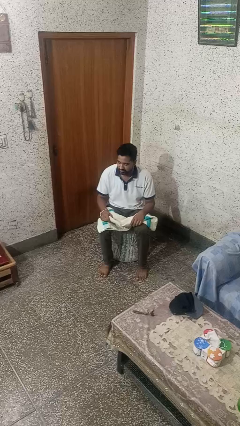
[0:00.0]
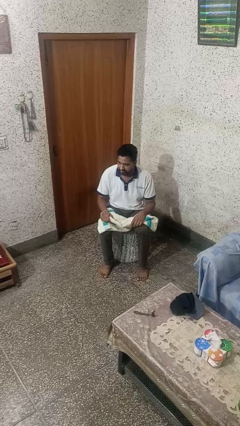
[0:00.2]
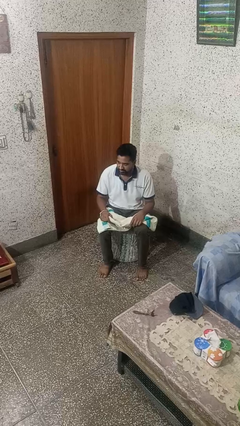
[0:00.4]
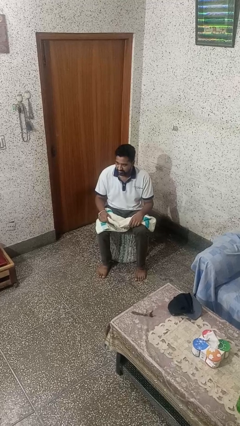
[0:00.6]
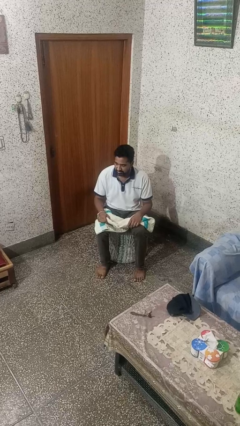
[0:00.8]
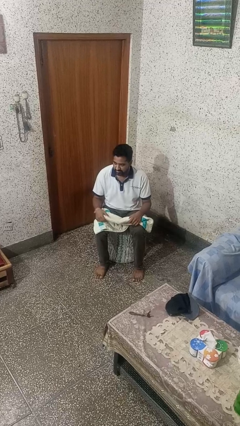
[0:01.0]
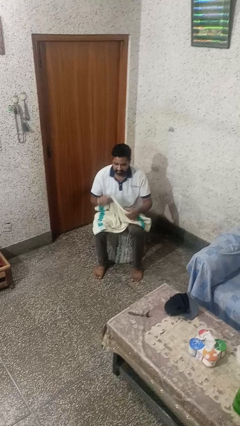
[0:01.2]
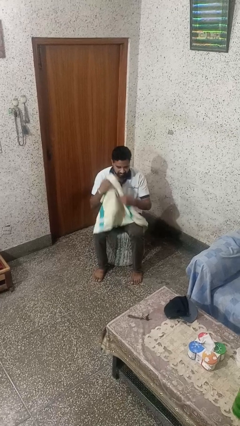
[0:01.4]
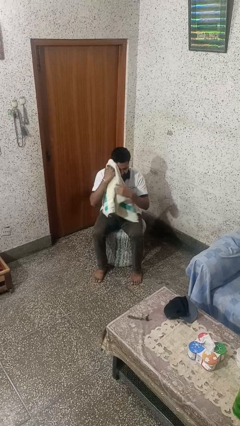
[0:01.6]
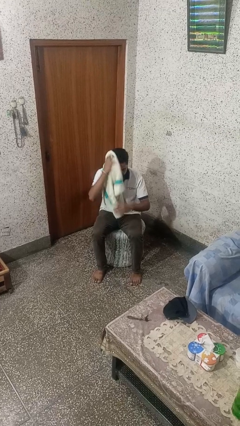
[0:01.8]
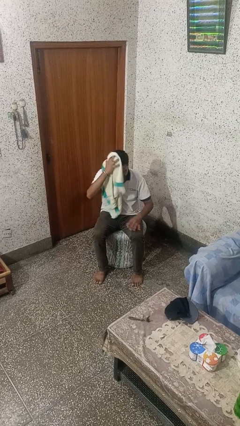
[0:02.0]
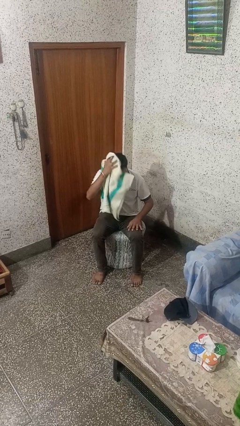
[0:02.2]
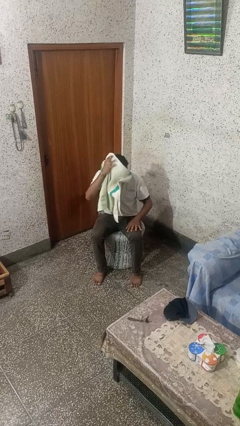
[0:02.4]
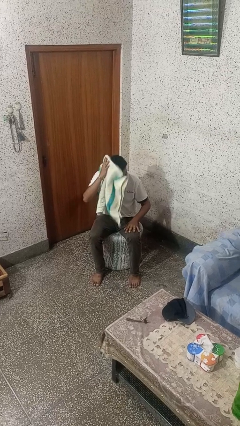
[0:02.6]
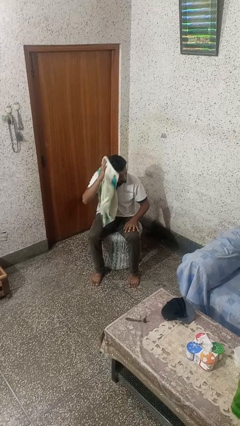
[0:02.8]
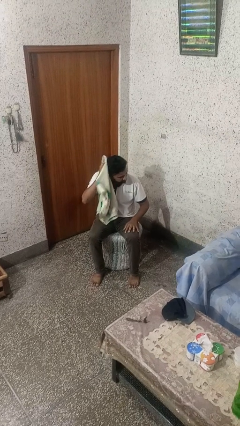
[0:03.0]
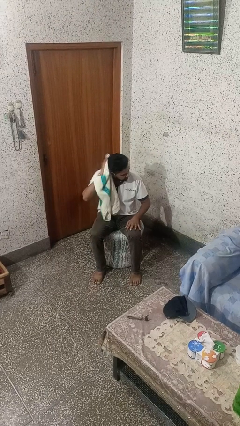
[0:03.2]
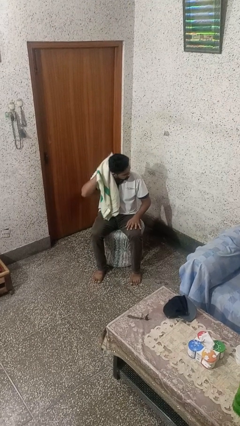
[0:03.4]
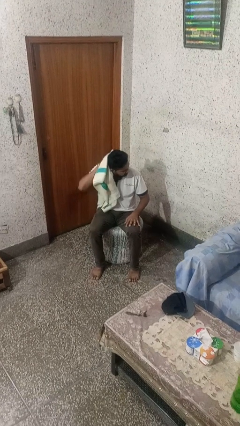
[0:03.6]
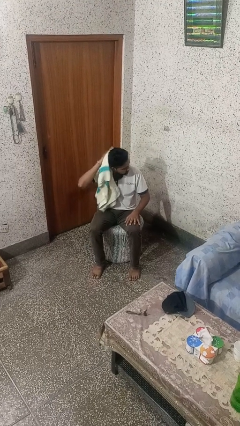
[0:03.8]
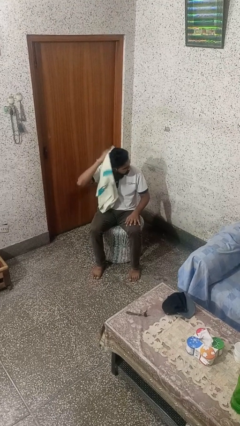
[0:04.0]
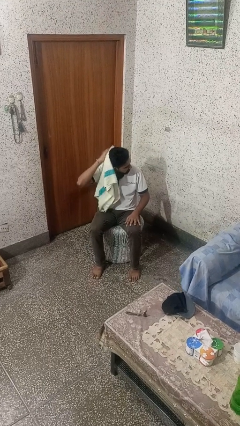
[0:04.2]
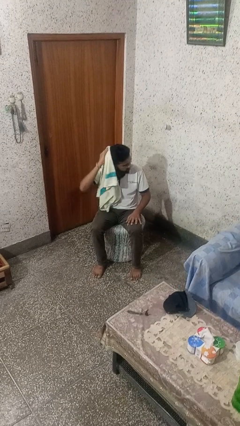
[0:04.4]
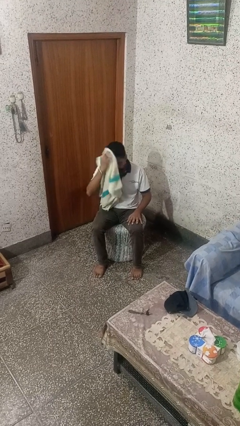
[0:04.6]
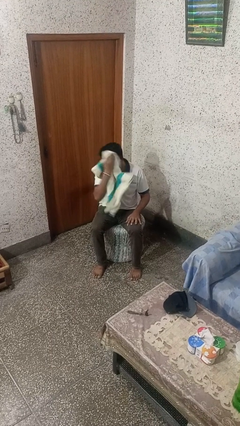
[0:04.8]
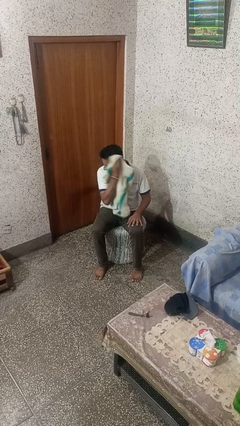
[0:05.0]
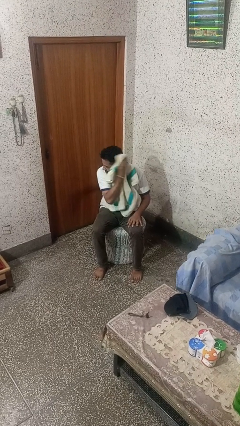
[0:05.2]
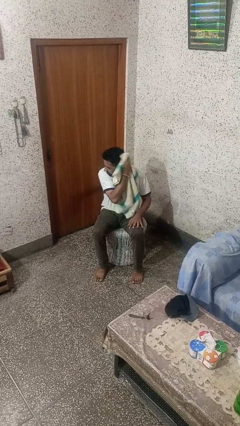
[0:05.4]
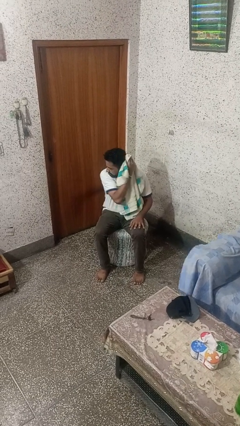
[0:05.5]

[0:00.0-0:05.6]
person dries hair with towel

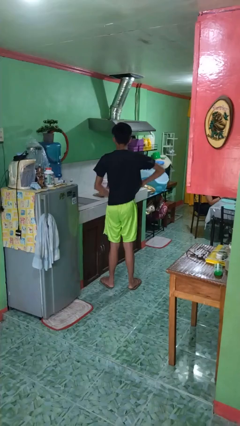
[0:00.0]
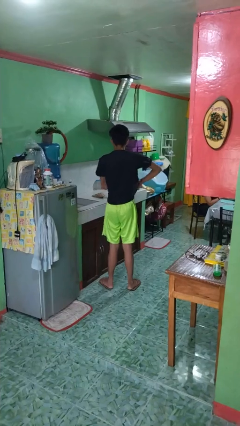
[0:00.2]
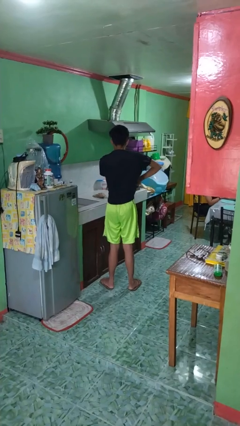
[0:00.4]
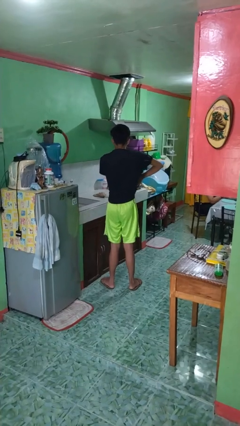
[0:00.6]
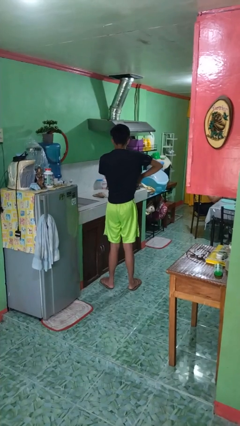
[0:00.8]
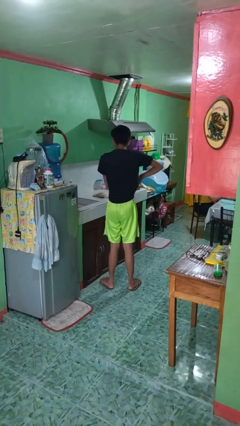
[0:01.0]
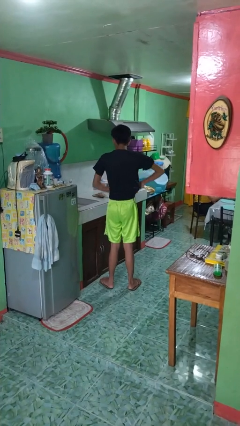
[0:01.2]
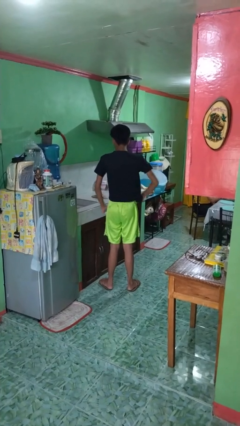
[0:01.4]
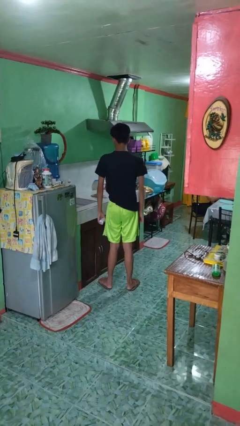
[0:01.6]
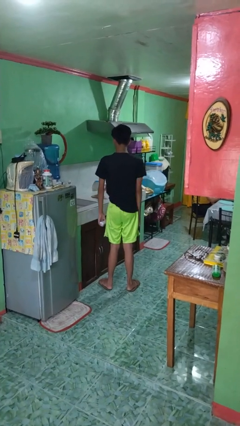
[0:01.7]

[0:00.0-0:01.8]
person applies deodorant

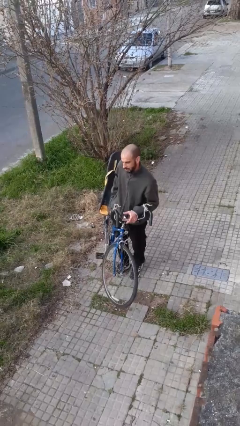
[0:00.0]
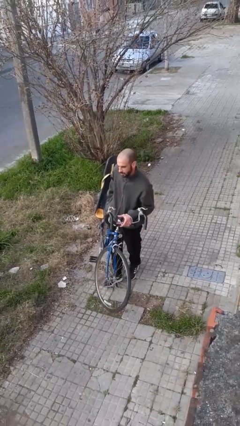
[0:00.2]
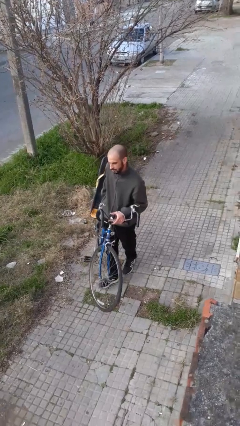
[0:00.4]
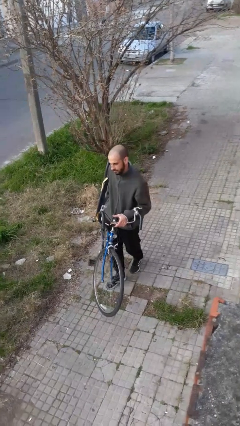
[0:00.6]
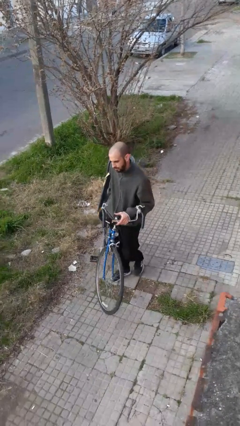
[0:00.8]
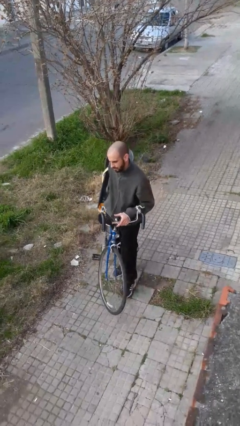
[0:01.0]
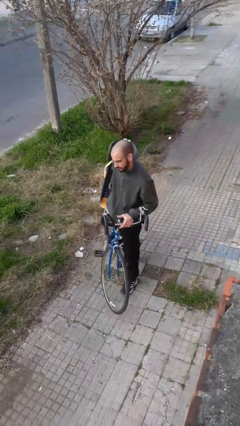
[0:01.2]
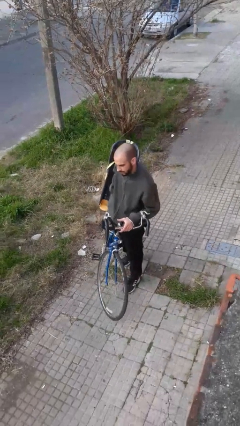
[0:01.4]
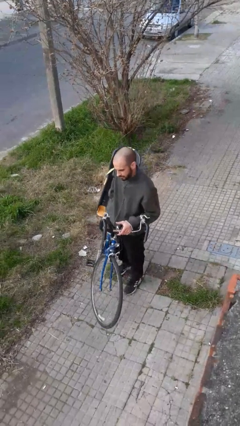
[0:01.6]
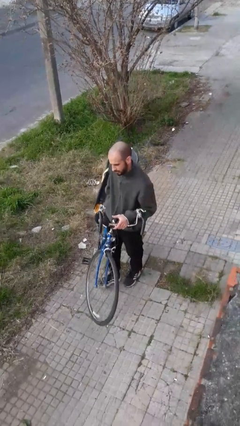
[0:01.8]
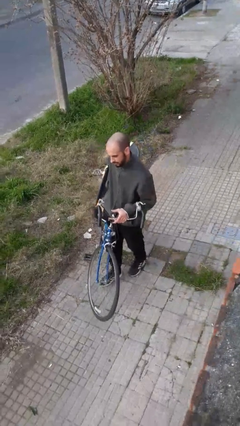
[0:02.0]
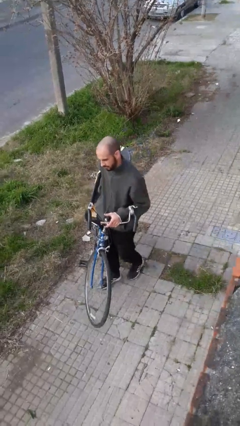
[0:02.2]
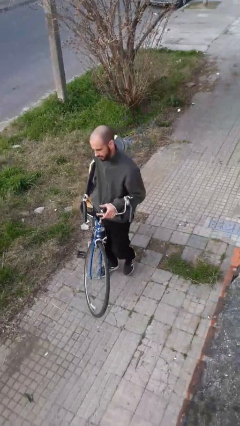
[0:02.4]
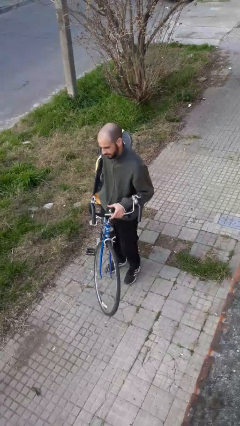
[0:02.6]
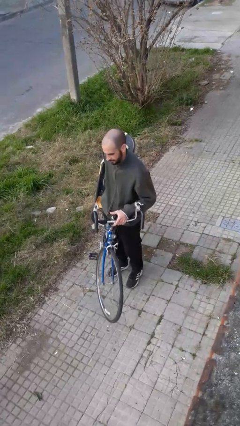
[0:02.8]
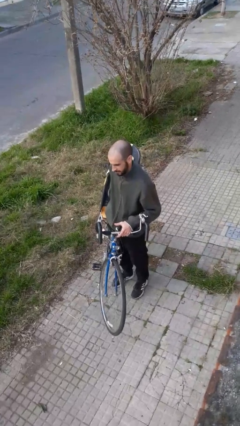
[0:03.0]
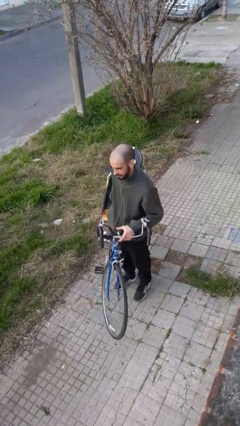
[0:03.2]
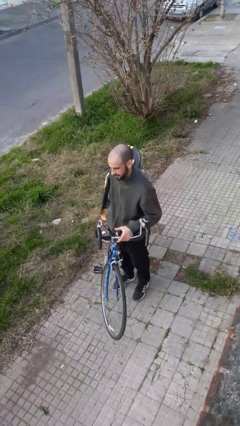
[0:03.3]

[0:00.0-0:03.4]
person carries bicycle

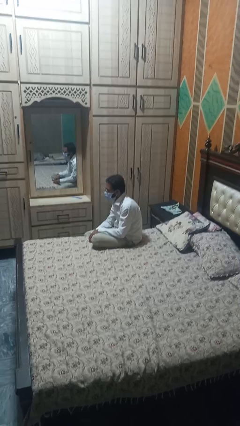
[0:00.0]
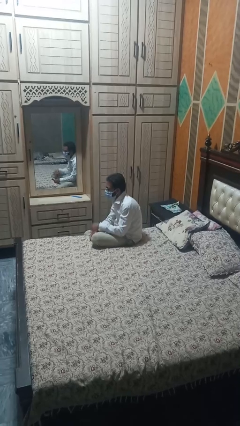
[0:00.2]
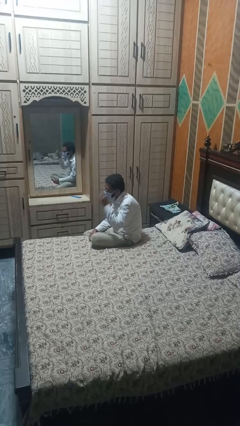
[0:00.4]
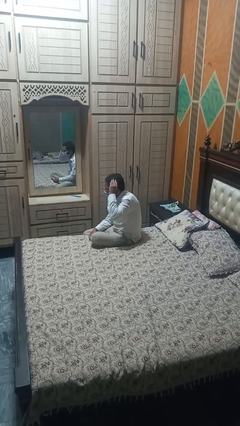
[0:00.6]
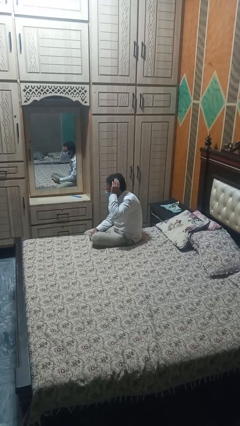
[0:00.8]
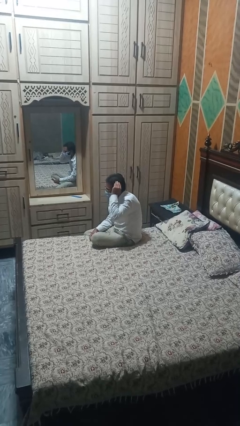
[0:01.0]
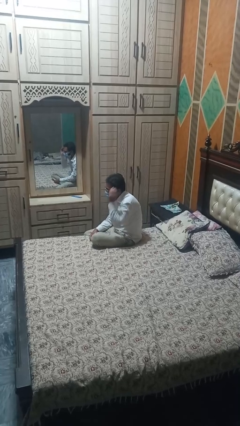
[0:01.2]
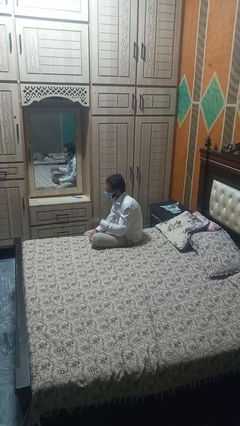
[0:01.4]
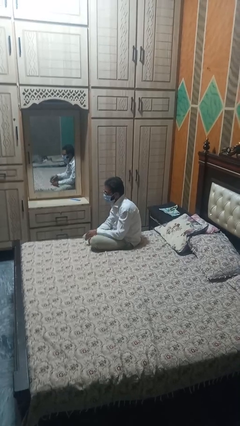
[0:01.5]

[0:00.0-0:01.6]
person strokes hair

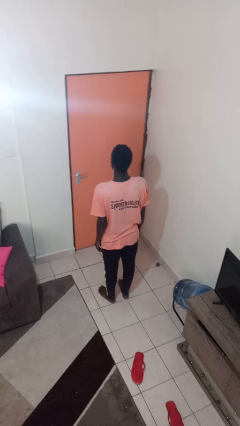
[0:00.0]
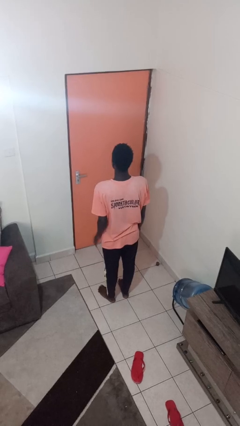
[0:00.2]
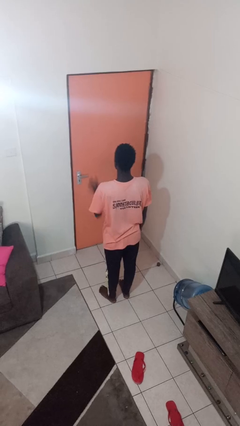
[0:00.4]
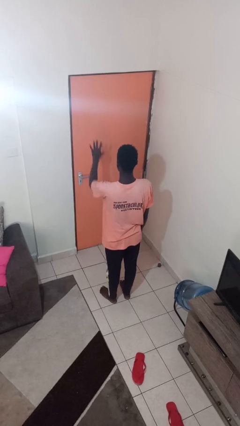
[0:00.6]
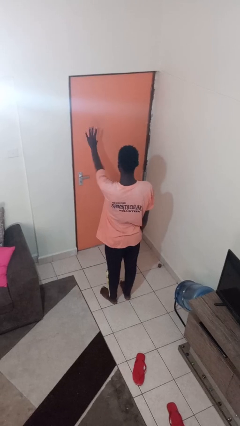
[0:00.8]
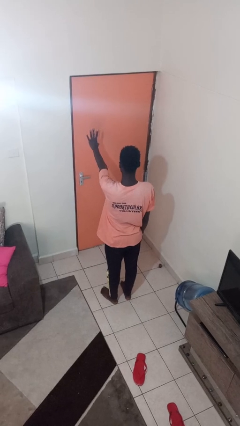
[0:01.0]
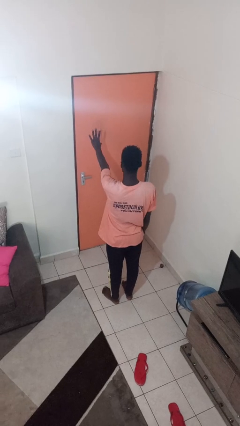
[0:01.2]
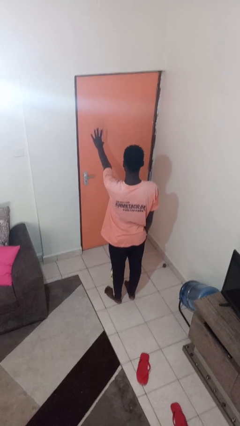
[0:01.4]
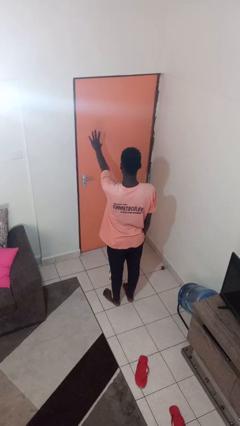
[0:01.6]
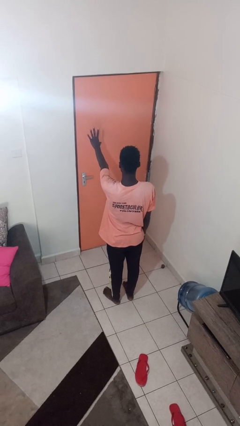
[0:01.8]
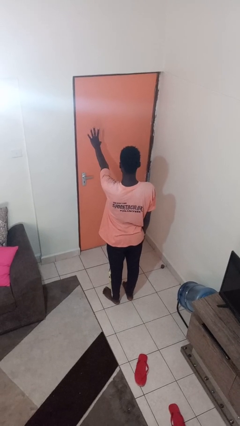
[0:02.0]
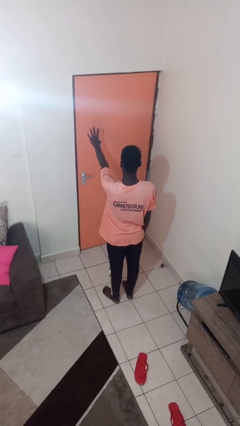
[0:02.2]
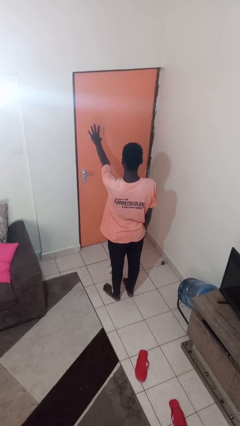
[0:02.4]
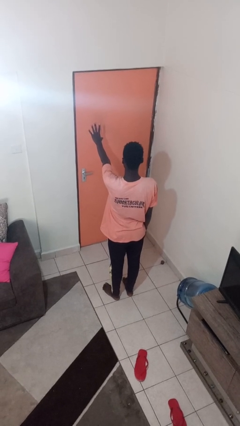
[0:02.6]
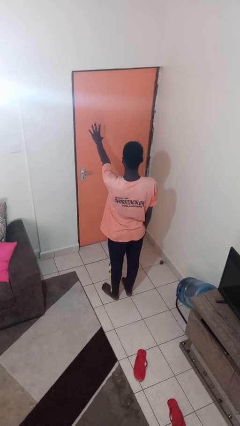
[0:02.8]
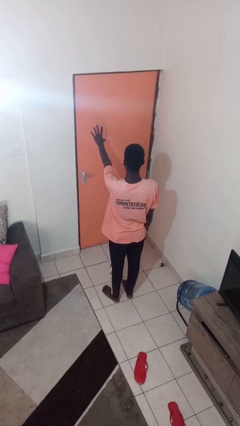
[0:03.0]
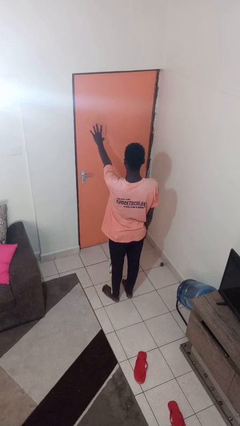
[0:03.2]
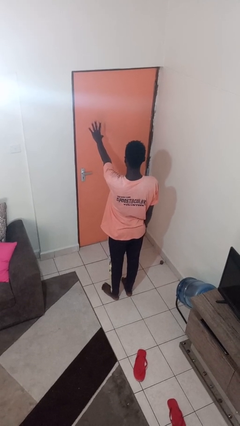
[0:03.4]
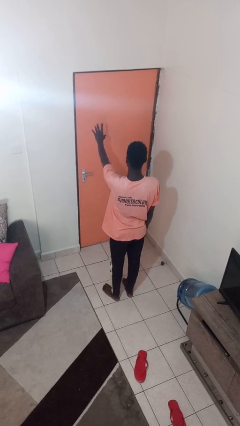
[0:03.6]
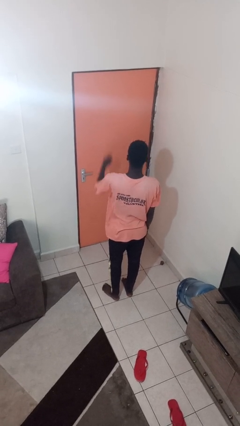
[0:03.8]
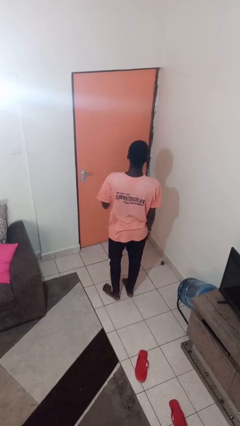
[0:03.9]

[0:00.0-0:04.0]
person gestures number five

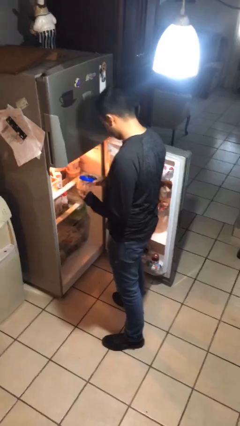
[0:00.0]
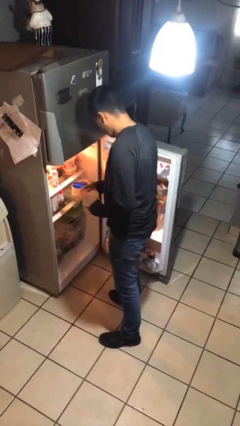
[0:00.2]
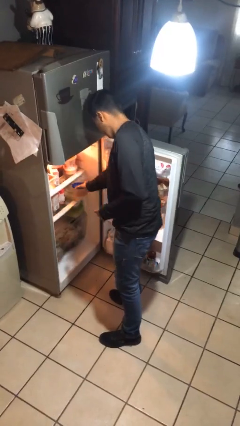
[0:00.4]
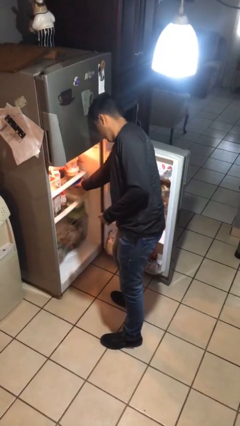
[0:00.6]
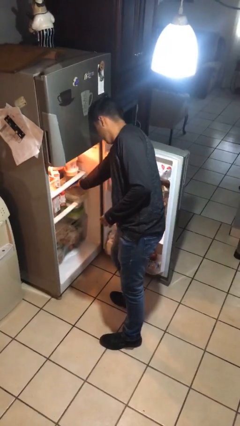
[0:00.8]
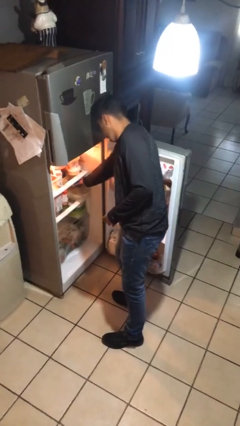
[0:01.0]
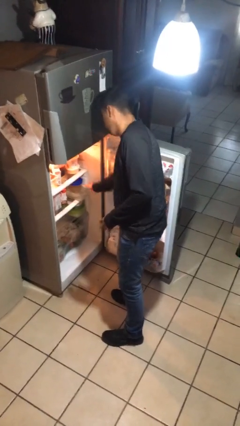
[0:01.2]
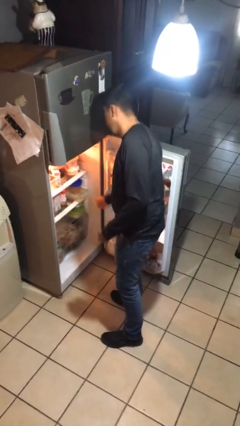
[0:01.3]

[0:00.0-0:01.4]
person takes object from refrigerator
